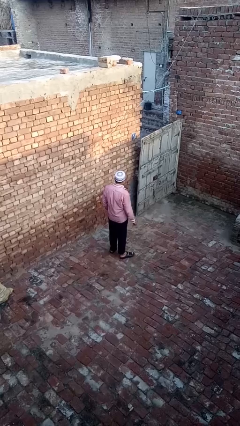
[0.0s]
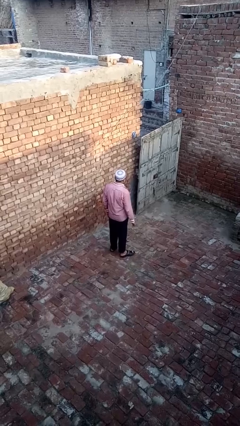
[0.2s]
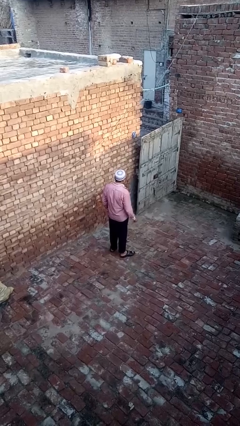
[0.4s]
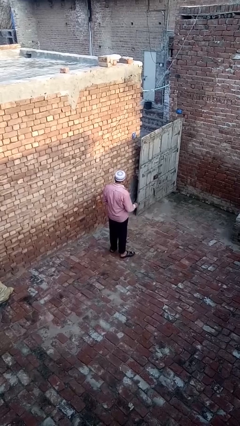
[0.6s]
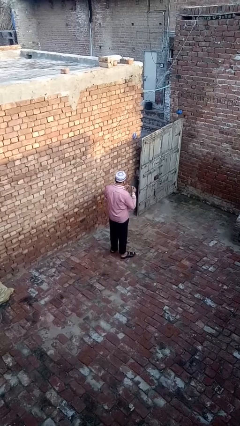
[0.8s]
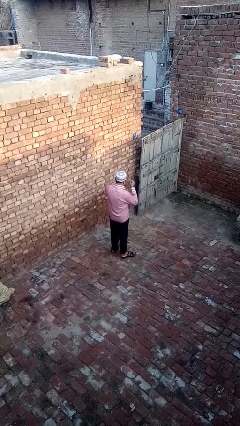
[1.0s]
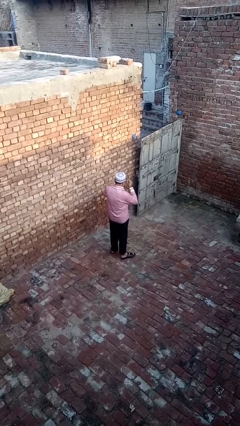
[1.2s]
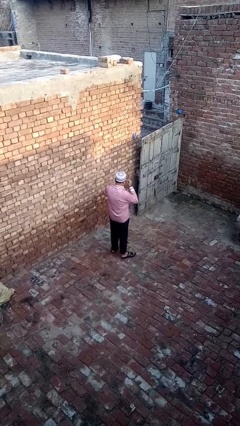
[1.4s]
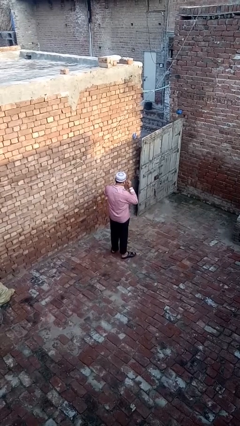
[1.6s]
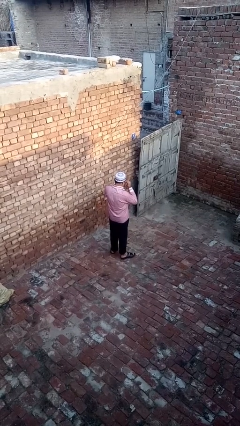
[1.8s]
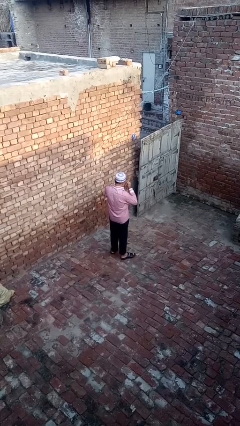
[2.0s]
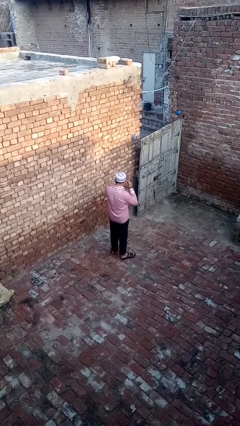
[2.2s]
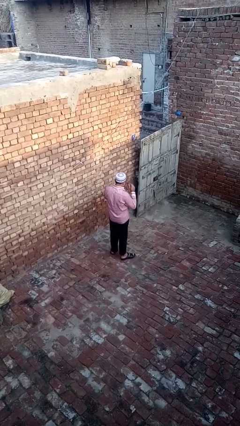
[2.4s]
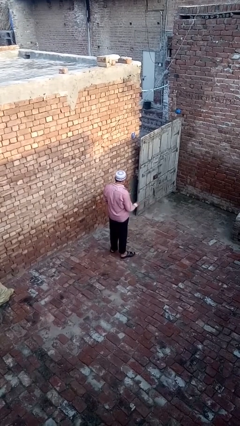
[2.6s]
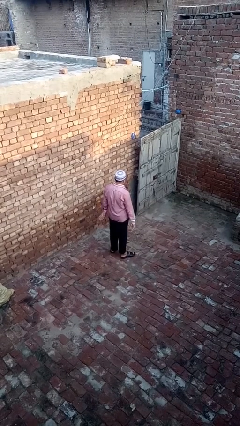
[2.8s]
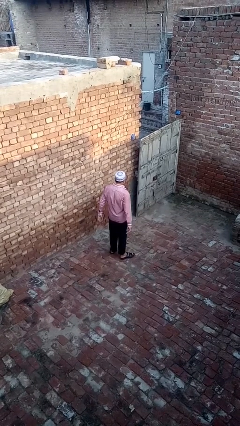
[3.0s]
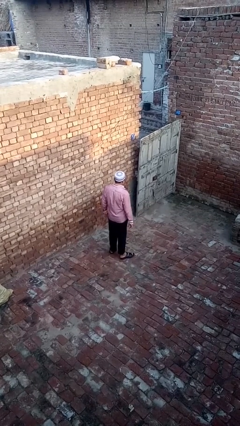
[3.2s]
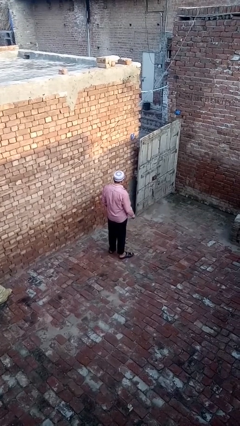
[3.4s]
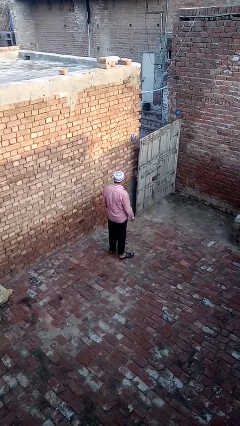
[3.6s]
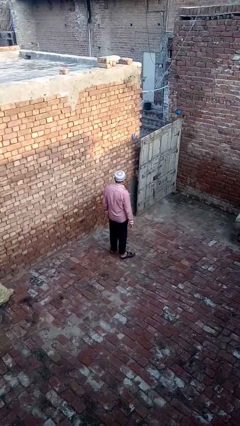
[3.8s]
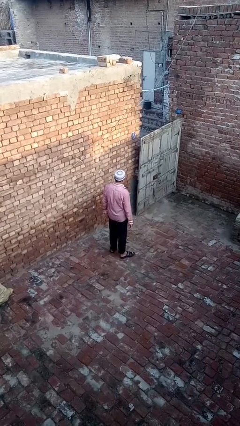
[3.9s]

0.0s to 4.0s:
person puts on glasses

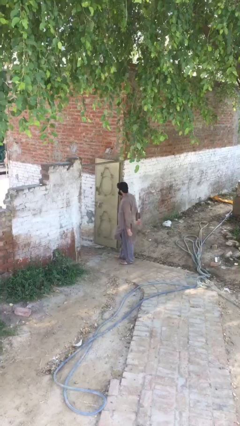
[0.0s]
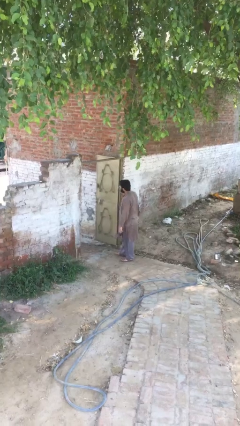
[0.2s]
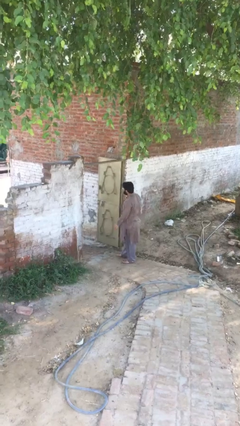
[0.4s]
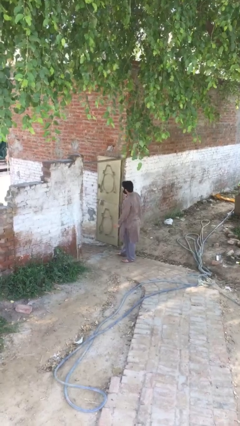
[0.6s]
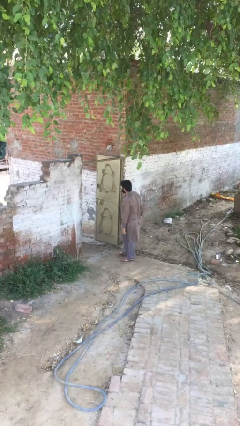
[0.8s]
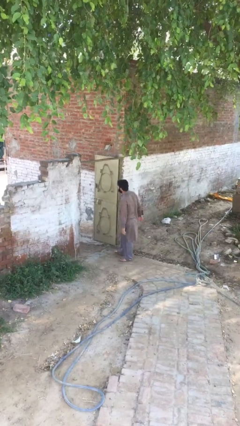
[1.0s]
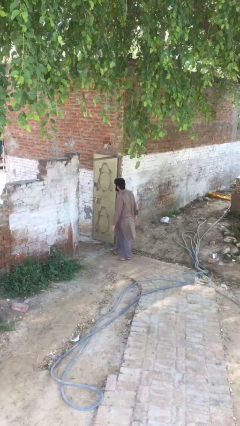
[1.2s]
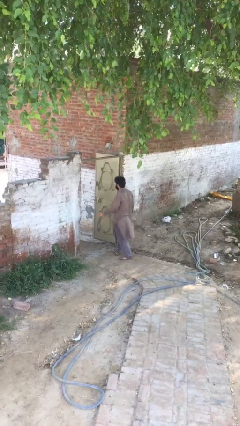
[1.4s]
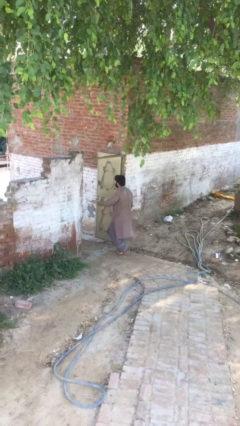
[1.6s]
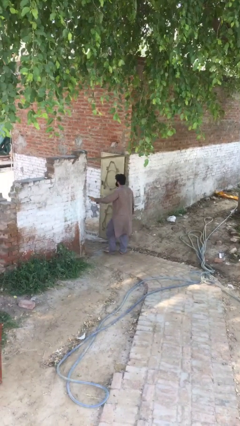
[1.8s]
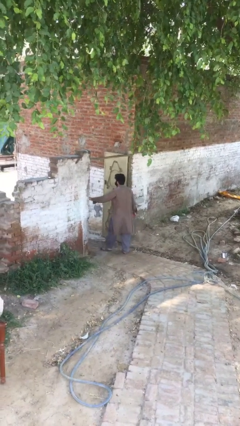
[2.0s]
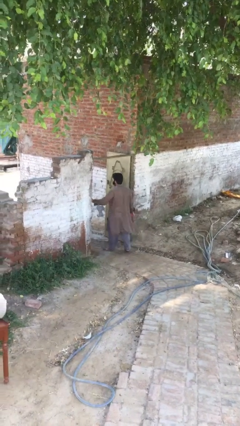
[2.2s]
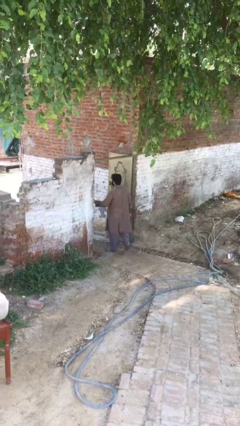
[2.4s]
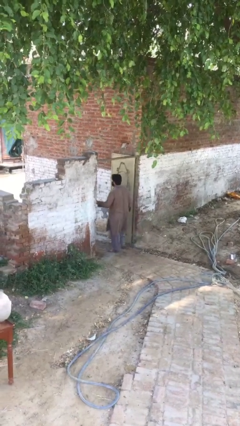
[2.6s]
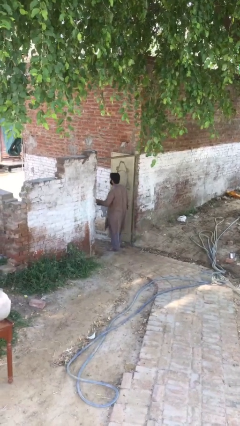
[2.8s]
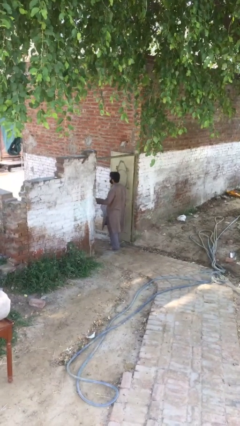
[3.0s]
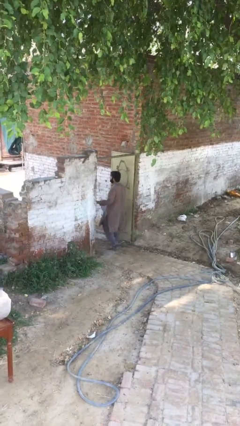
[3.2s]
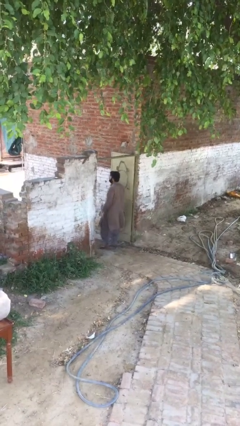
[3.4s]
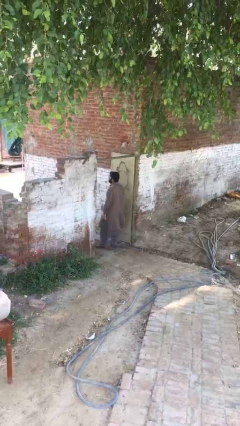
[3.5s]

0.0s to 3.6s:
person exits scene through structure

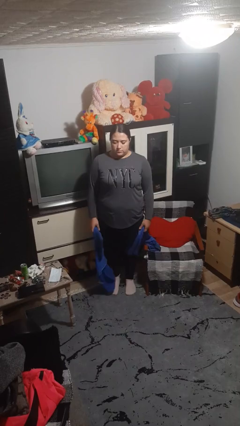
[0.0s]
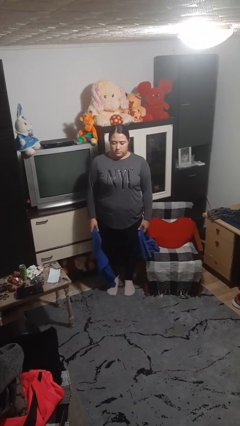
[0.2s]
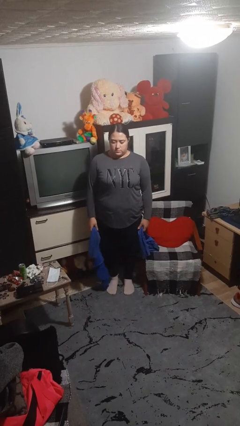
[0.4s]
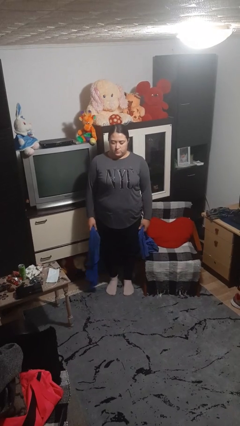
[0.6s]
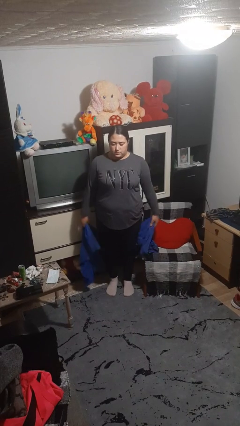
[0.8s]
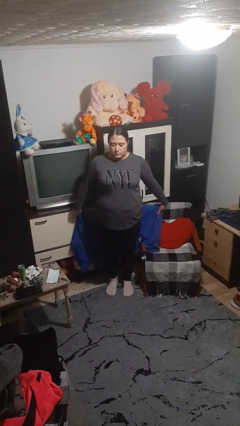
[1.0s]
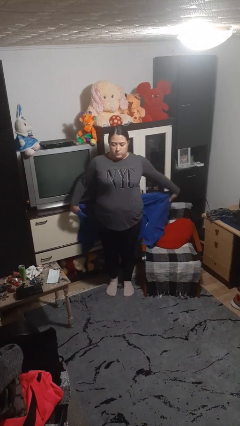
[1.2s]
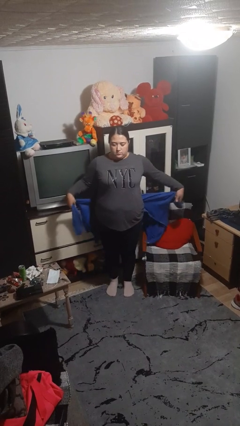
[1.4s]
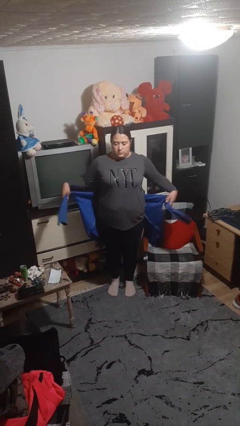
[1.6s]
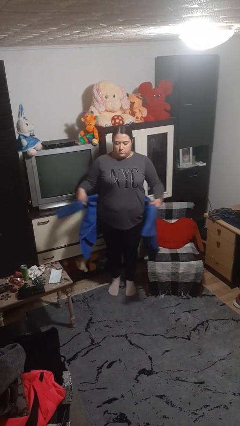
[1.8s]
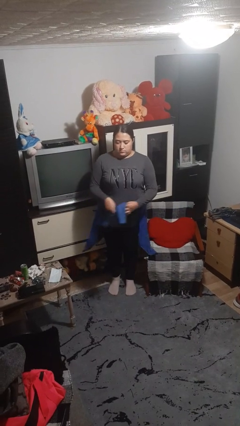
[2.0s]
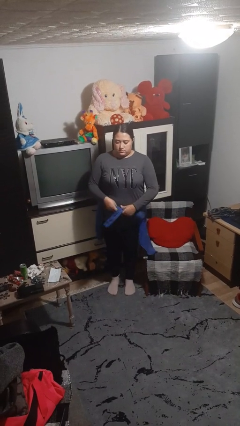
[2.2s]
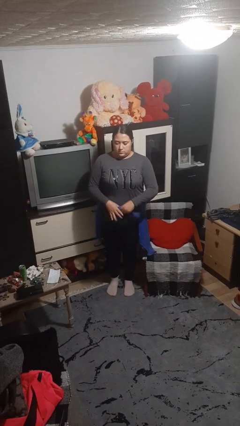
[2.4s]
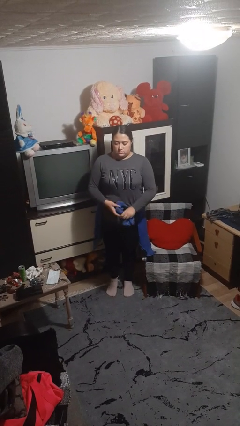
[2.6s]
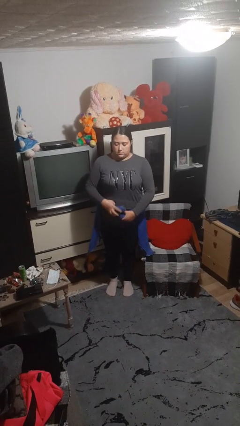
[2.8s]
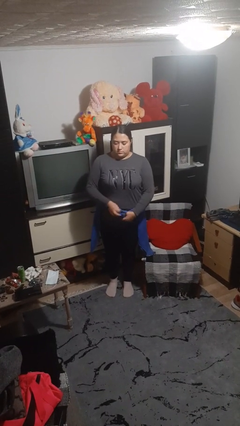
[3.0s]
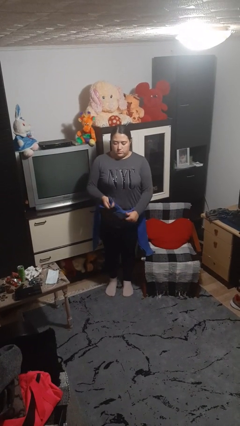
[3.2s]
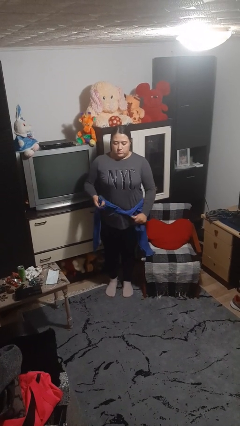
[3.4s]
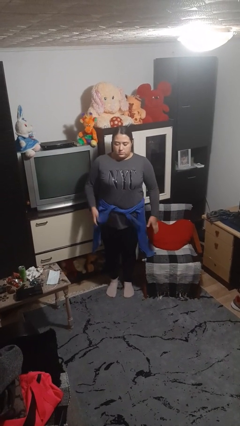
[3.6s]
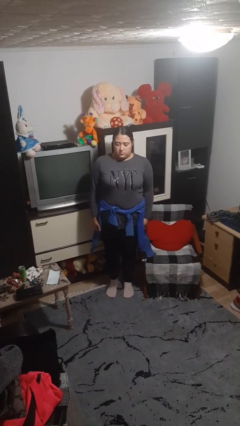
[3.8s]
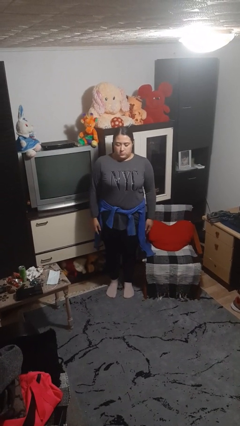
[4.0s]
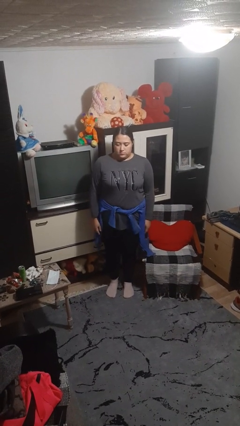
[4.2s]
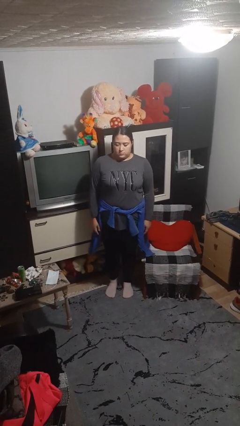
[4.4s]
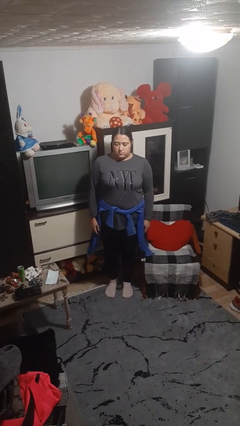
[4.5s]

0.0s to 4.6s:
person ties jacket around waist

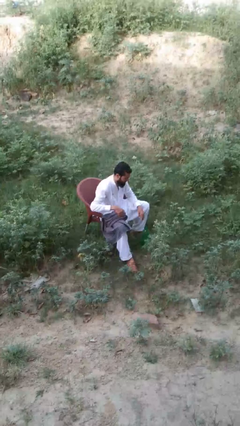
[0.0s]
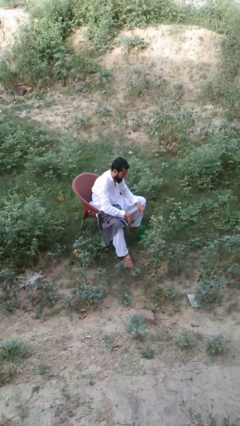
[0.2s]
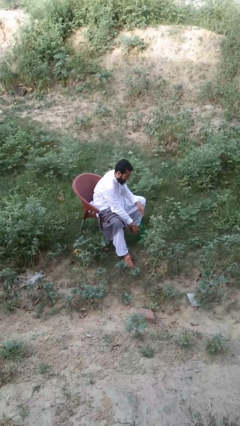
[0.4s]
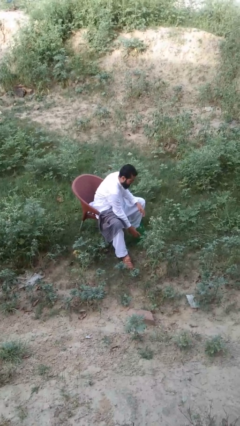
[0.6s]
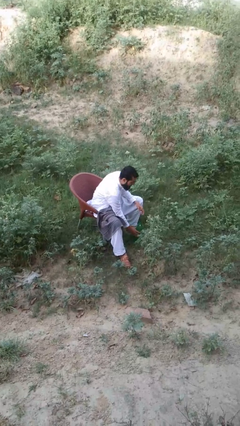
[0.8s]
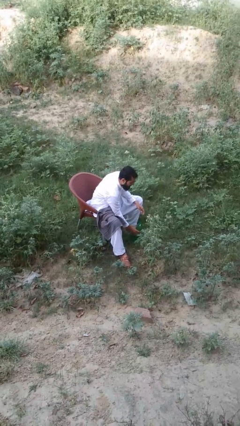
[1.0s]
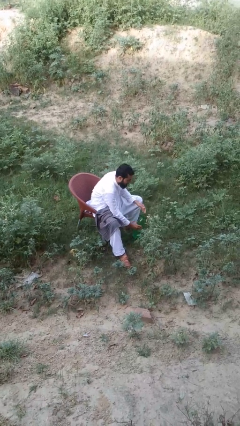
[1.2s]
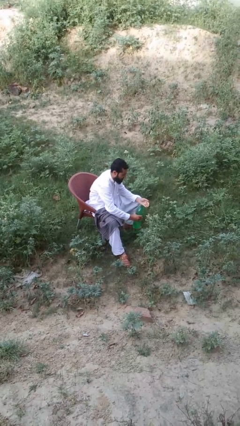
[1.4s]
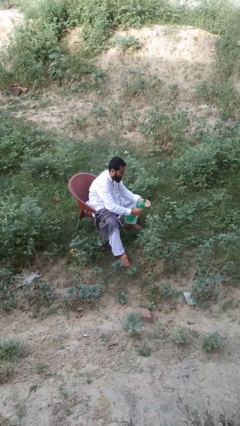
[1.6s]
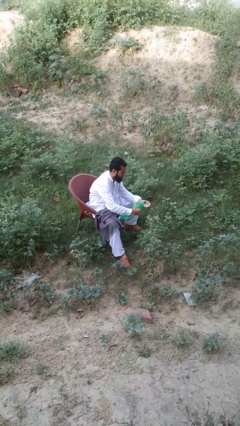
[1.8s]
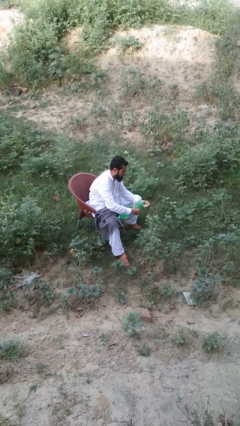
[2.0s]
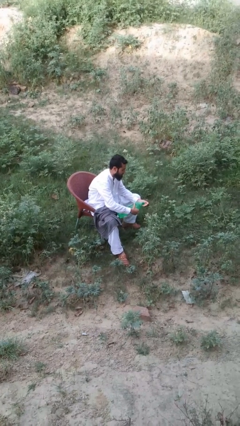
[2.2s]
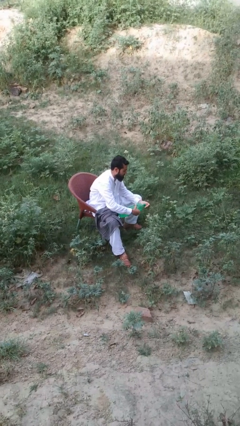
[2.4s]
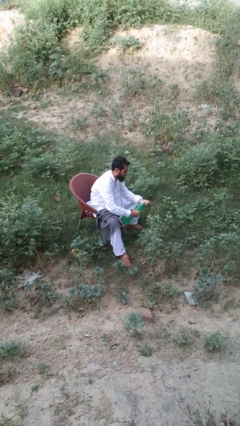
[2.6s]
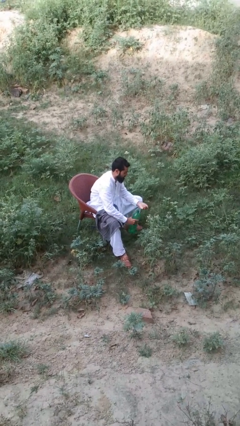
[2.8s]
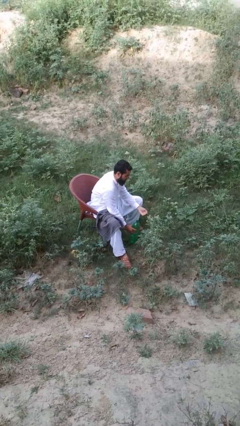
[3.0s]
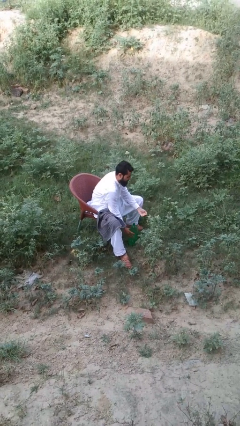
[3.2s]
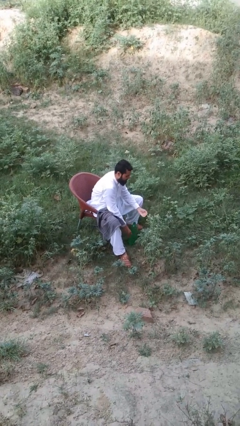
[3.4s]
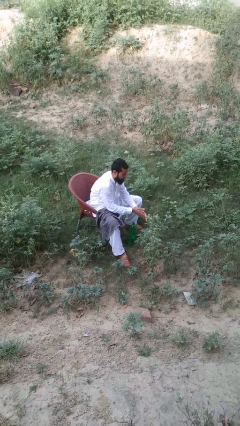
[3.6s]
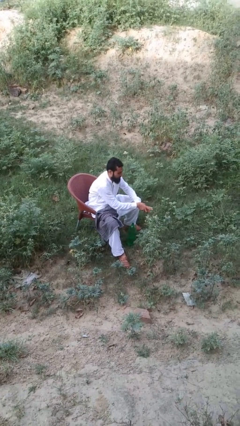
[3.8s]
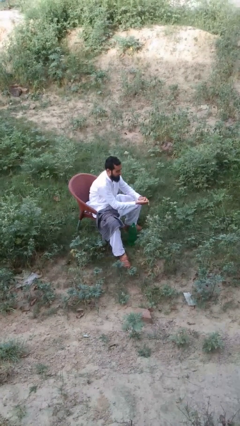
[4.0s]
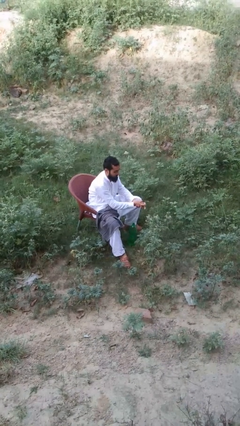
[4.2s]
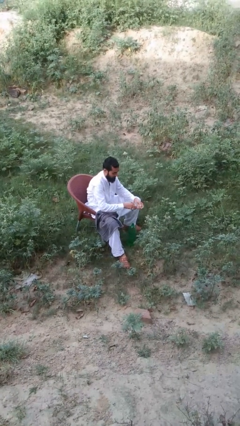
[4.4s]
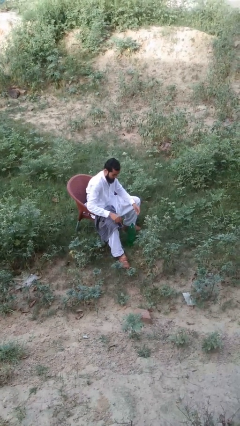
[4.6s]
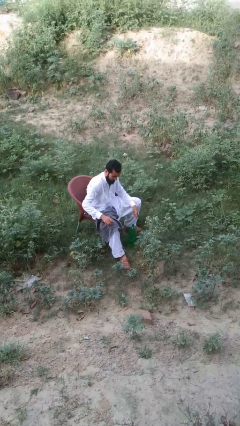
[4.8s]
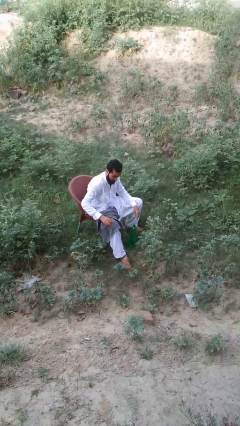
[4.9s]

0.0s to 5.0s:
person washes hands

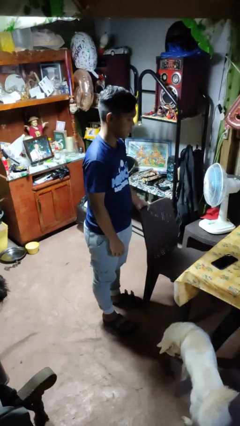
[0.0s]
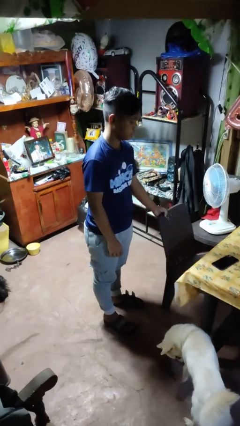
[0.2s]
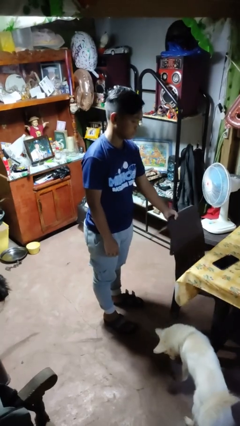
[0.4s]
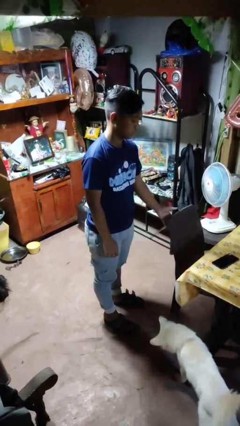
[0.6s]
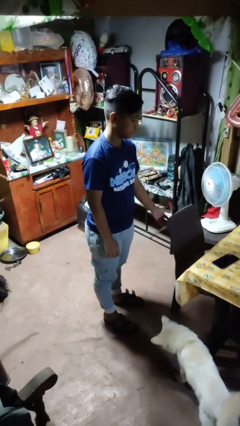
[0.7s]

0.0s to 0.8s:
person pushes in chair

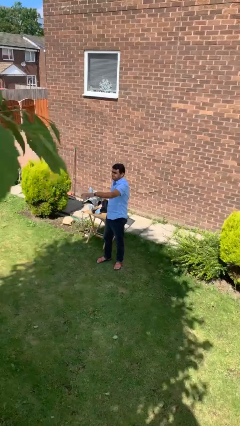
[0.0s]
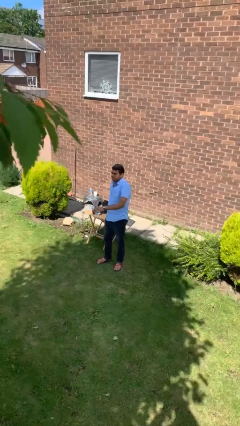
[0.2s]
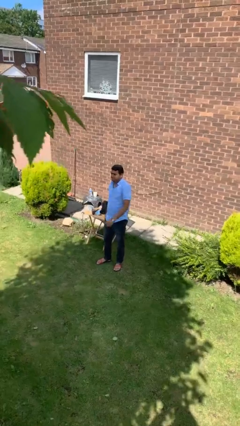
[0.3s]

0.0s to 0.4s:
person punches
